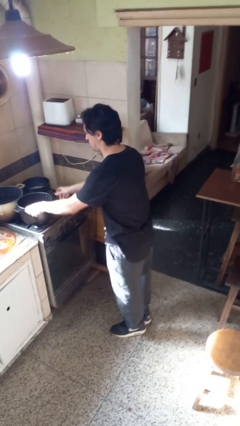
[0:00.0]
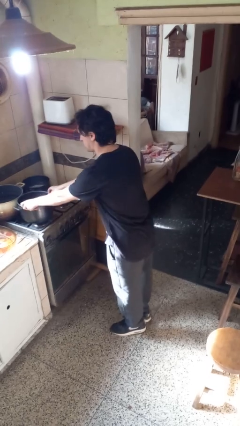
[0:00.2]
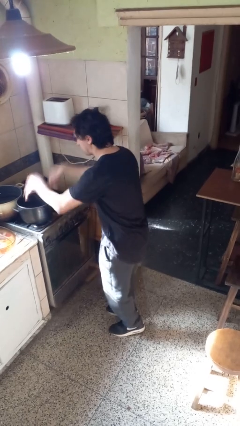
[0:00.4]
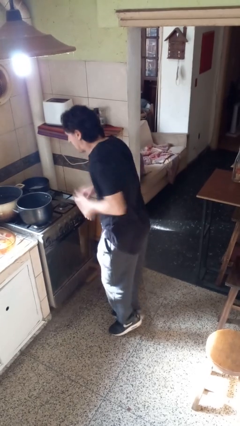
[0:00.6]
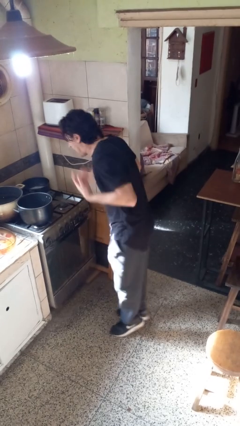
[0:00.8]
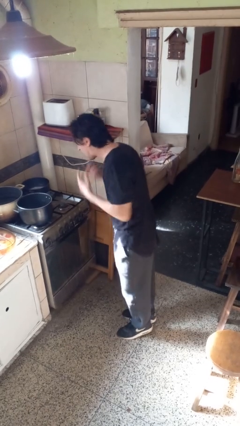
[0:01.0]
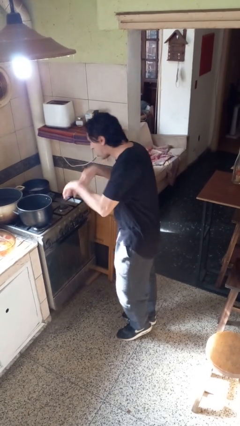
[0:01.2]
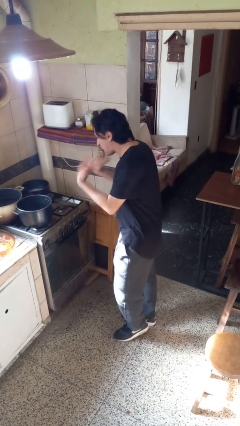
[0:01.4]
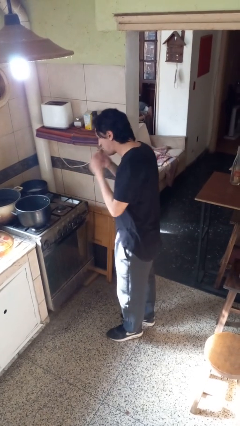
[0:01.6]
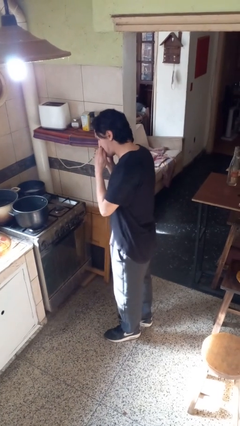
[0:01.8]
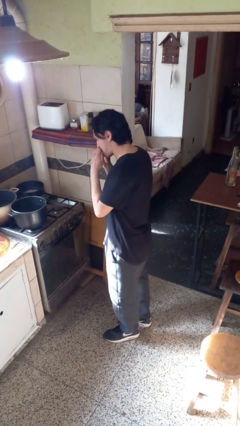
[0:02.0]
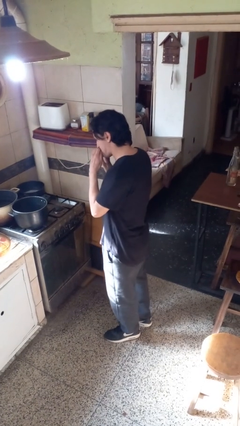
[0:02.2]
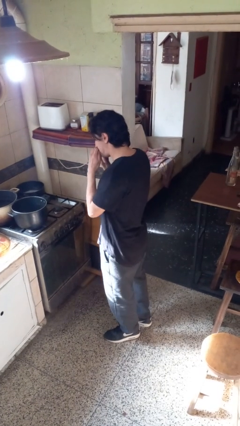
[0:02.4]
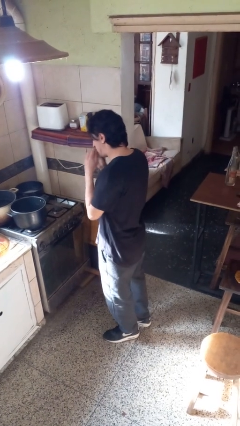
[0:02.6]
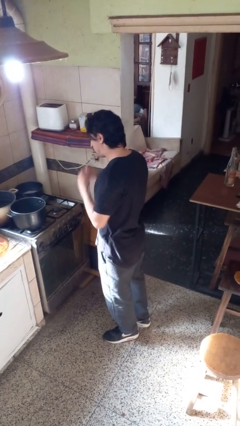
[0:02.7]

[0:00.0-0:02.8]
person burns hand

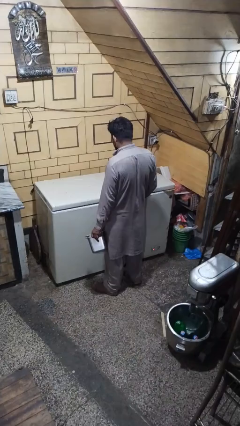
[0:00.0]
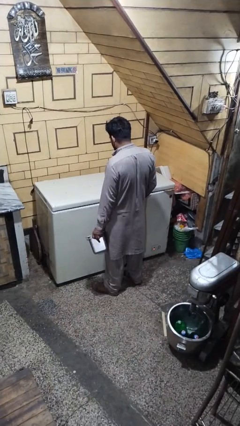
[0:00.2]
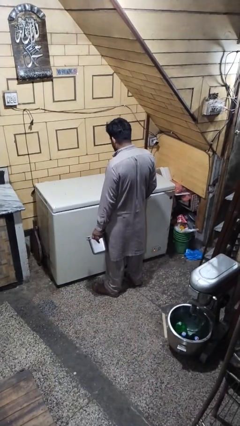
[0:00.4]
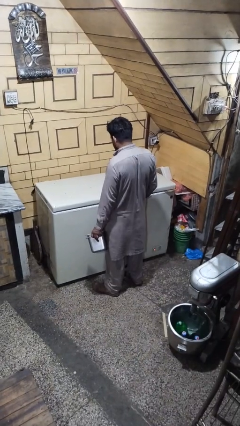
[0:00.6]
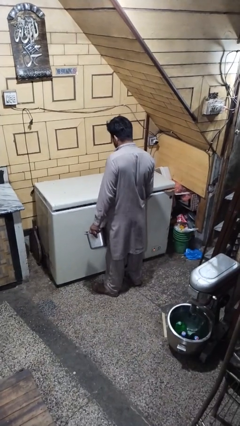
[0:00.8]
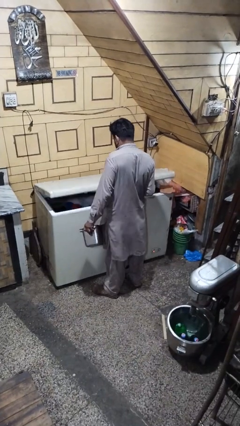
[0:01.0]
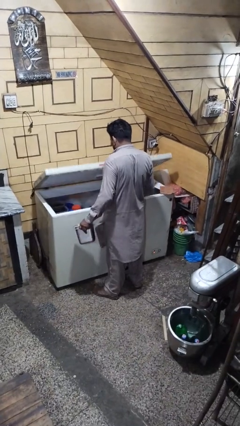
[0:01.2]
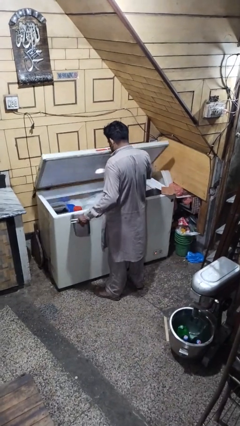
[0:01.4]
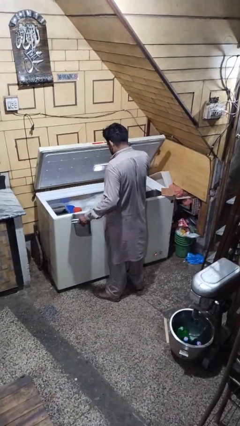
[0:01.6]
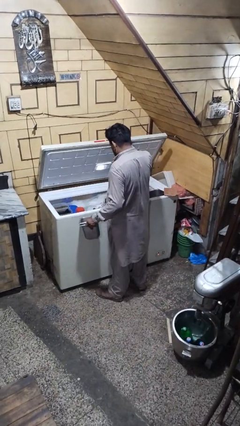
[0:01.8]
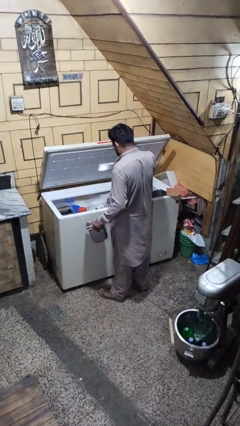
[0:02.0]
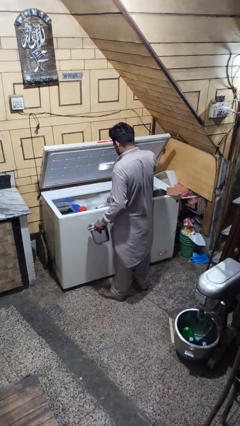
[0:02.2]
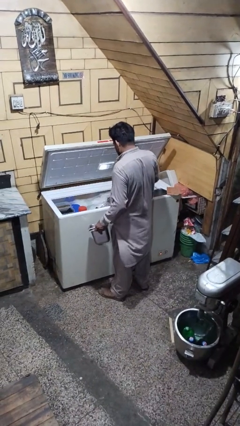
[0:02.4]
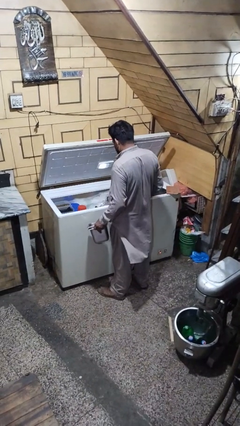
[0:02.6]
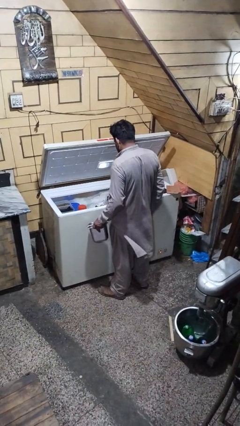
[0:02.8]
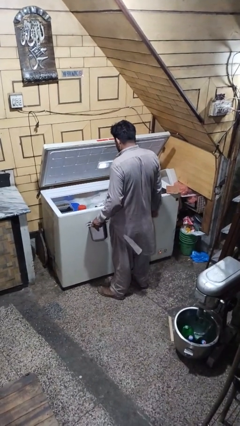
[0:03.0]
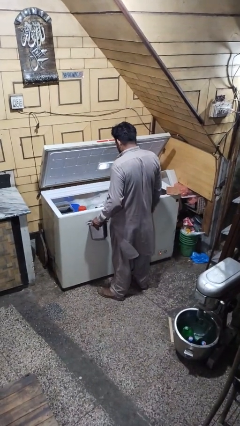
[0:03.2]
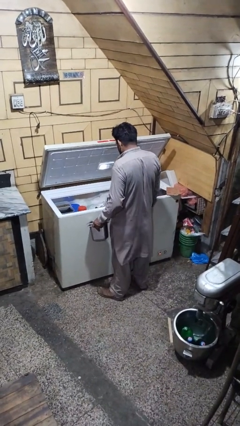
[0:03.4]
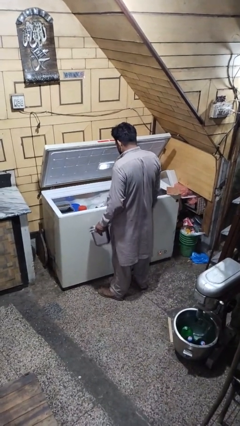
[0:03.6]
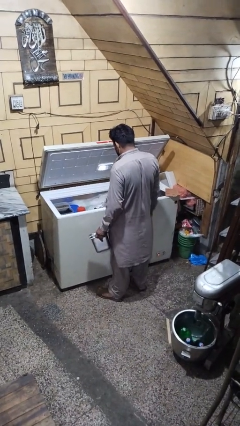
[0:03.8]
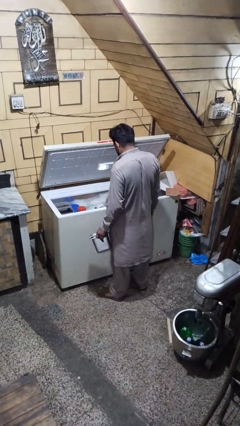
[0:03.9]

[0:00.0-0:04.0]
person opens refrigerator

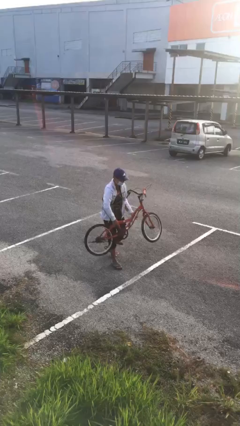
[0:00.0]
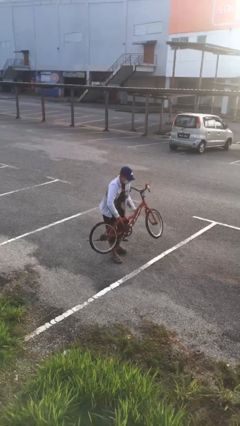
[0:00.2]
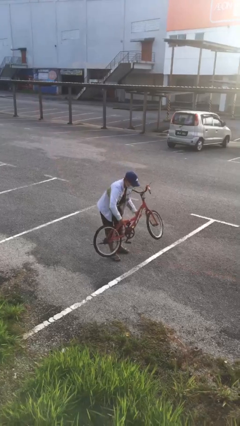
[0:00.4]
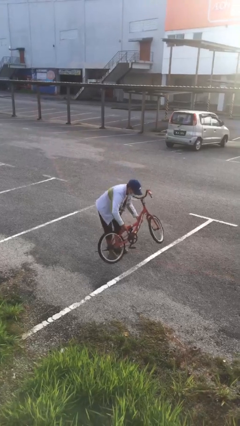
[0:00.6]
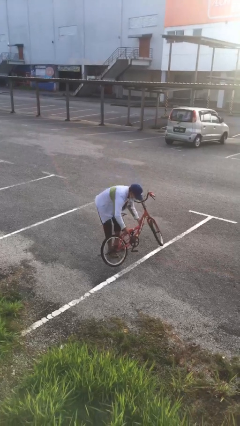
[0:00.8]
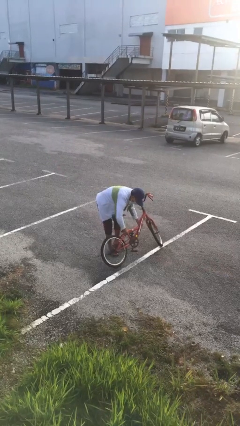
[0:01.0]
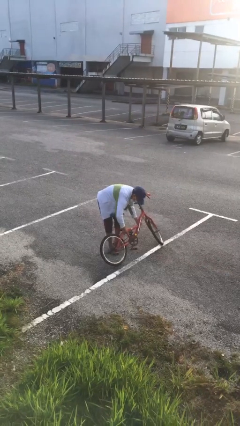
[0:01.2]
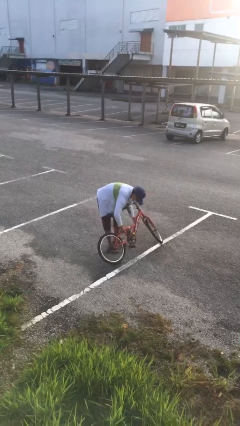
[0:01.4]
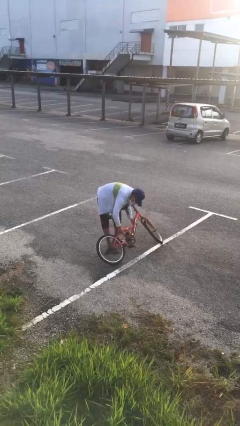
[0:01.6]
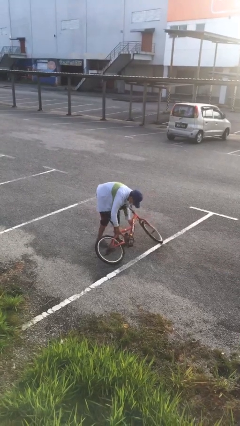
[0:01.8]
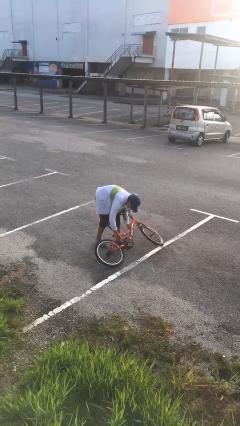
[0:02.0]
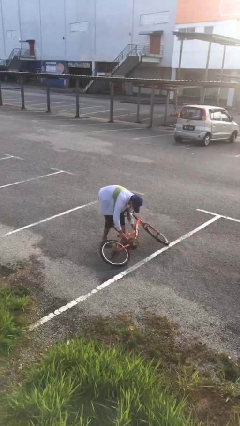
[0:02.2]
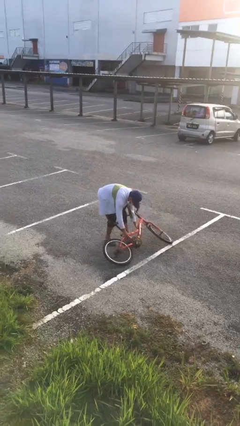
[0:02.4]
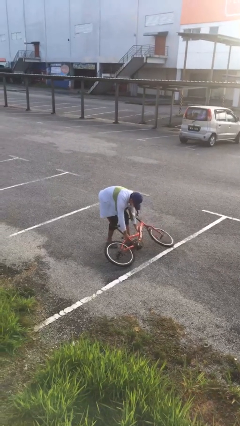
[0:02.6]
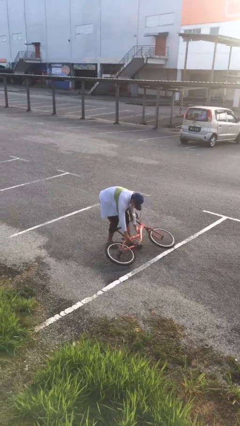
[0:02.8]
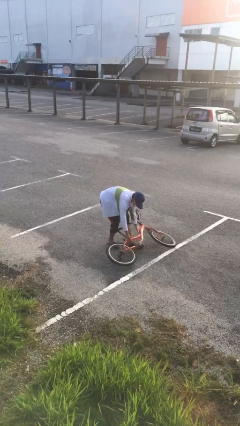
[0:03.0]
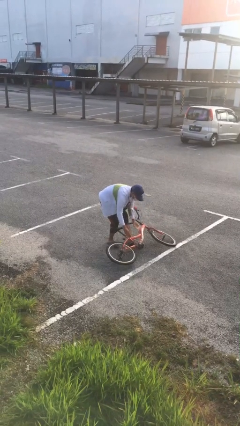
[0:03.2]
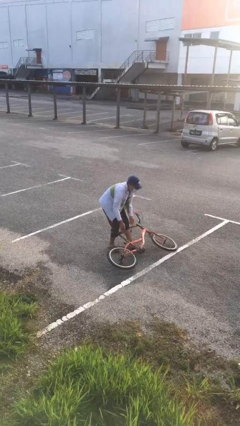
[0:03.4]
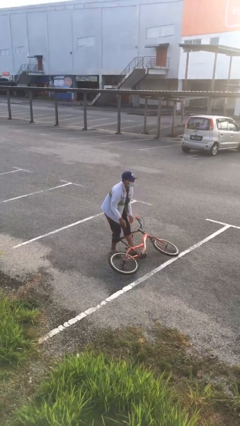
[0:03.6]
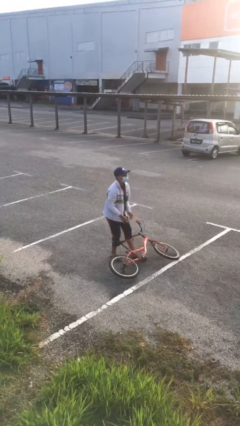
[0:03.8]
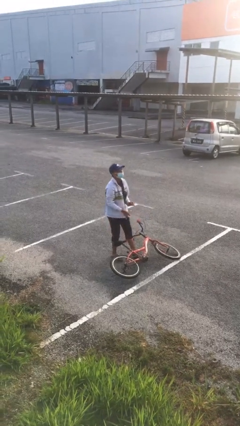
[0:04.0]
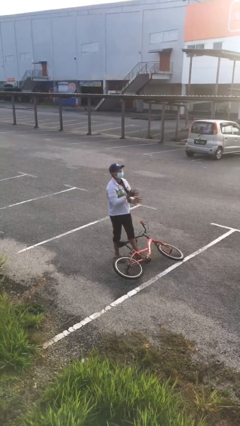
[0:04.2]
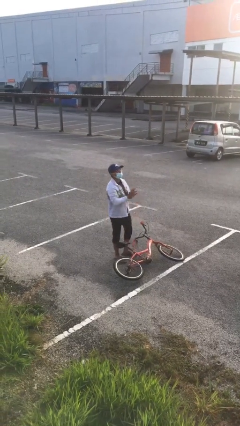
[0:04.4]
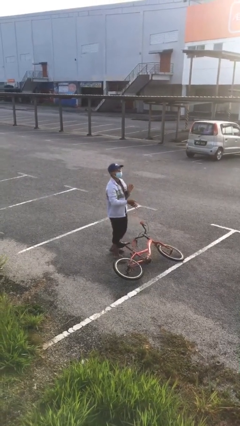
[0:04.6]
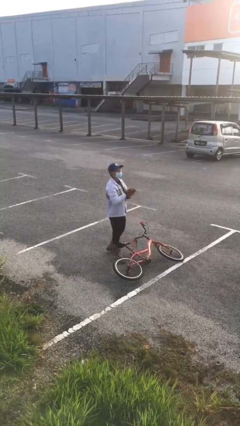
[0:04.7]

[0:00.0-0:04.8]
person puts down object on floor

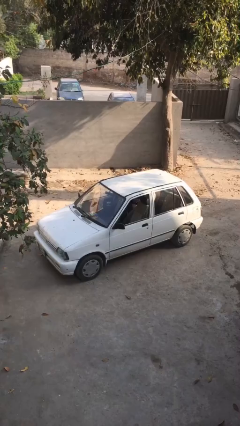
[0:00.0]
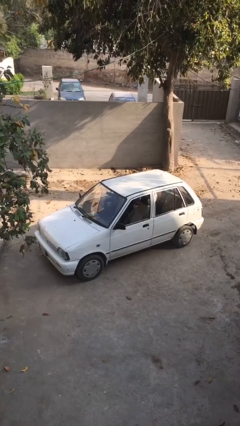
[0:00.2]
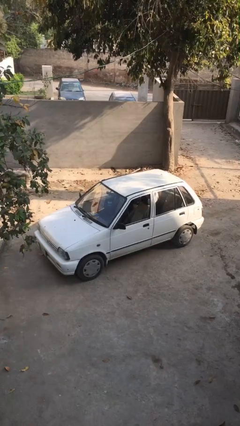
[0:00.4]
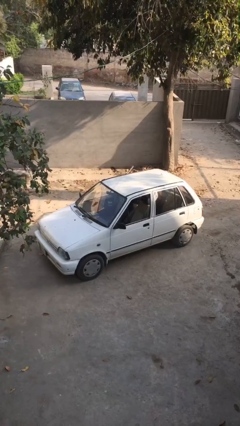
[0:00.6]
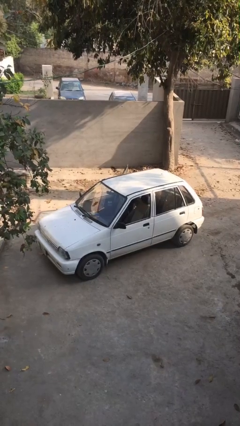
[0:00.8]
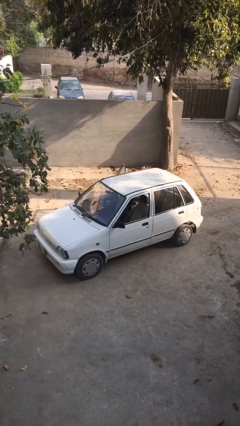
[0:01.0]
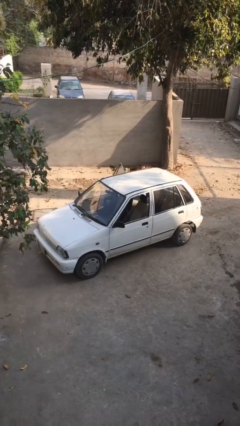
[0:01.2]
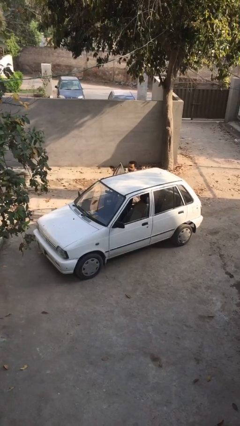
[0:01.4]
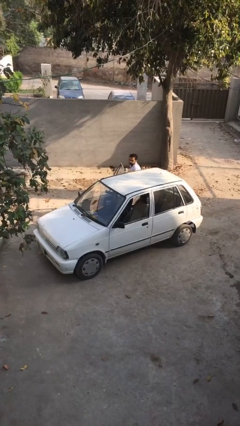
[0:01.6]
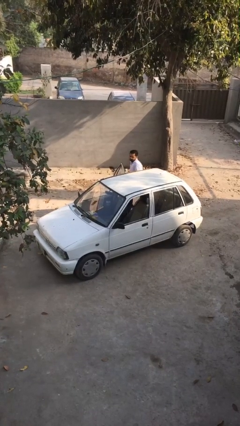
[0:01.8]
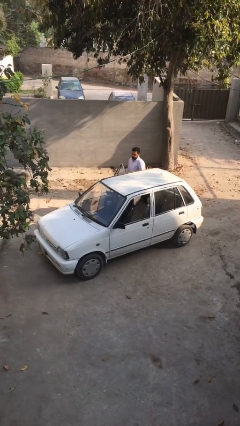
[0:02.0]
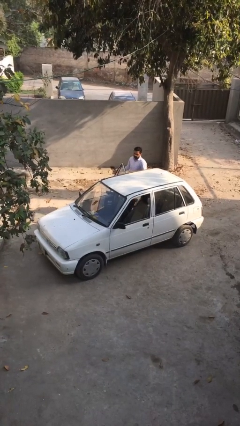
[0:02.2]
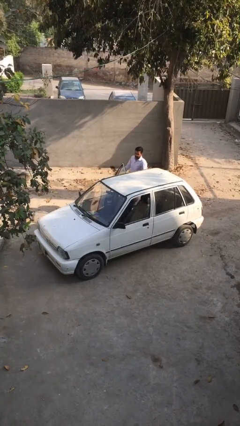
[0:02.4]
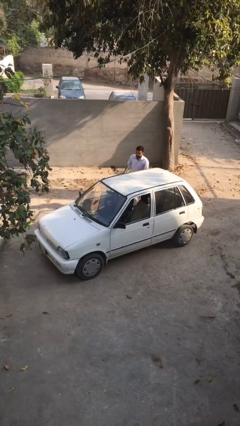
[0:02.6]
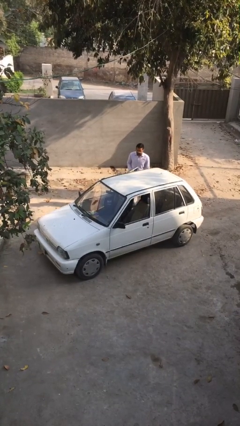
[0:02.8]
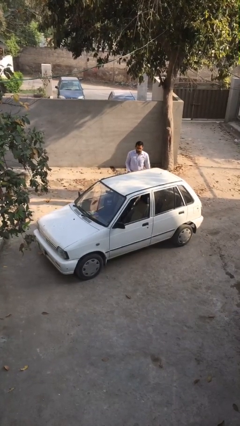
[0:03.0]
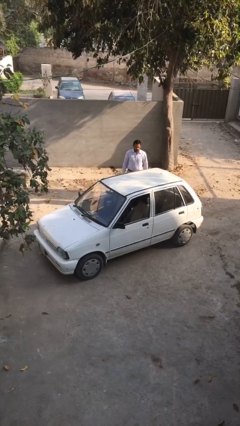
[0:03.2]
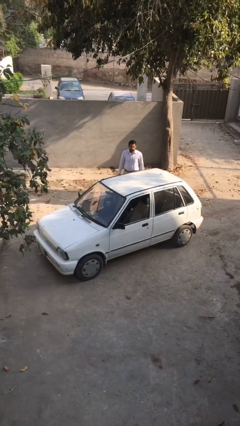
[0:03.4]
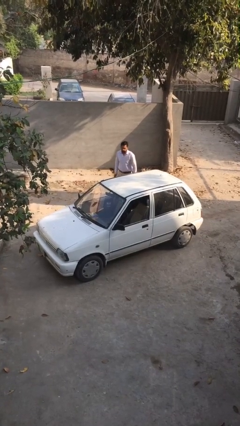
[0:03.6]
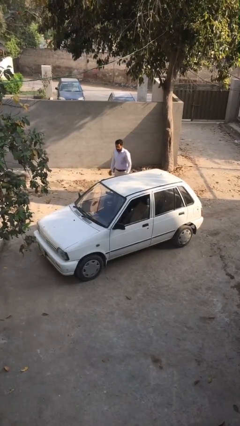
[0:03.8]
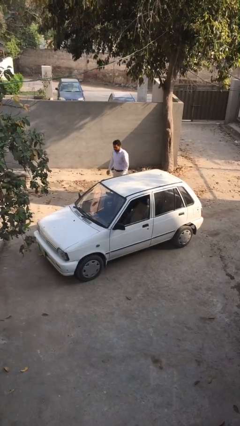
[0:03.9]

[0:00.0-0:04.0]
car drops off person

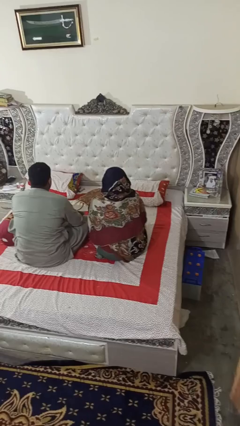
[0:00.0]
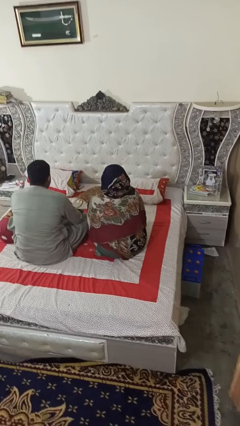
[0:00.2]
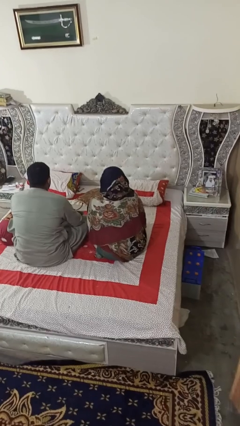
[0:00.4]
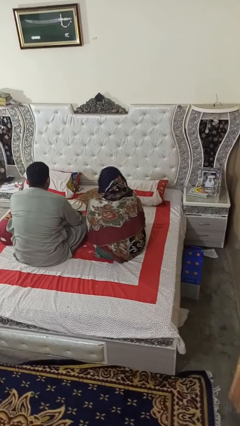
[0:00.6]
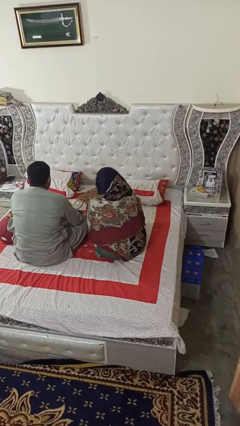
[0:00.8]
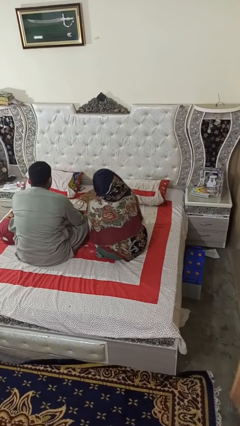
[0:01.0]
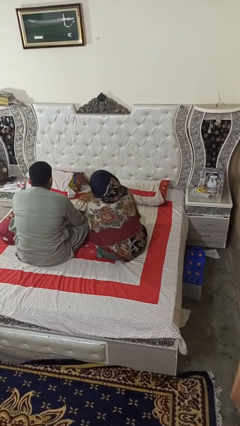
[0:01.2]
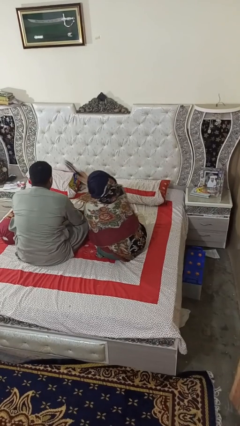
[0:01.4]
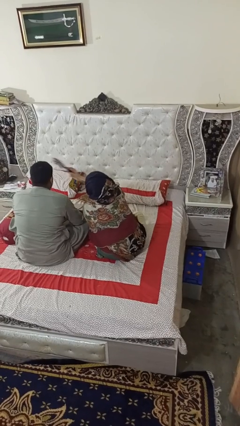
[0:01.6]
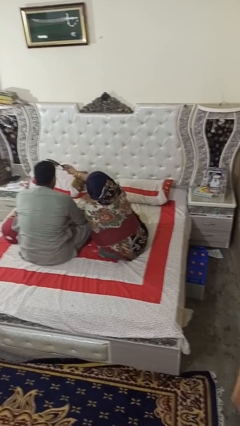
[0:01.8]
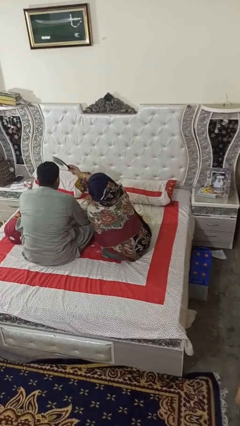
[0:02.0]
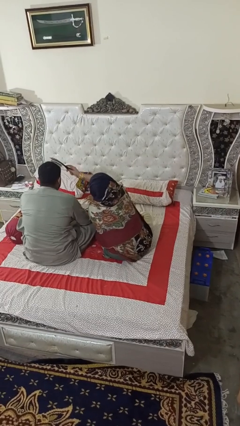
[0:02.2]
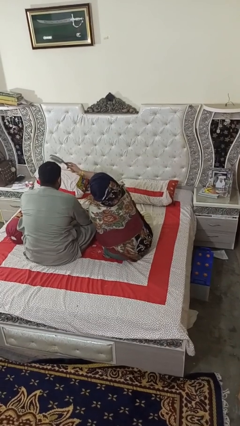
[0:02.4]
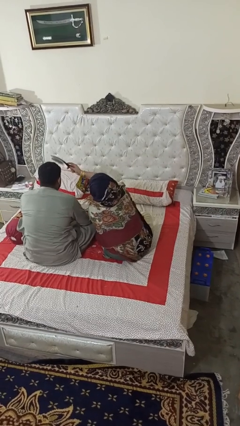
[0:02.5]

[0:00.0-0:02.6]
person brushes hair of person
